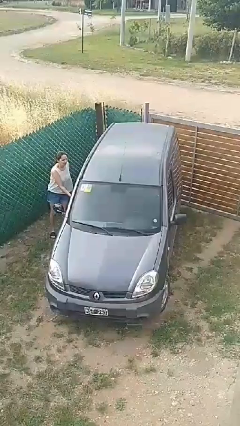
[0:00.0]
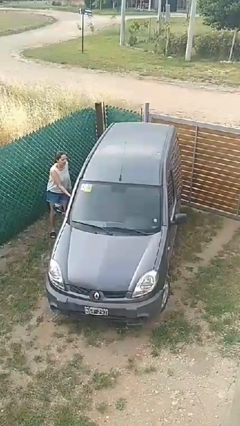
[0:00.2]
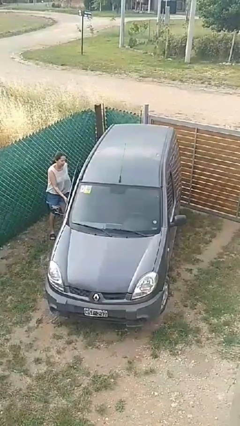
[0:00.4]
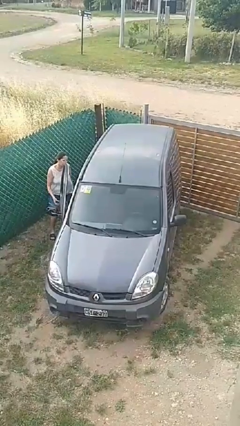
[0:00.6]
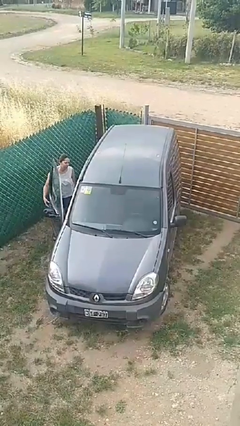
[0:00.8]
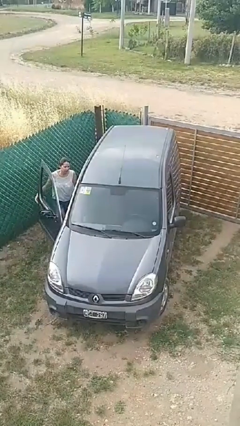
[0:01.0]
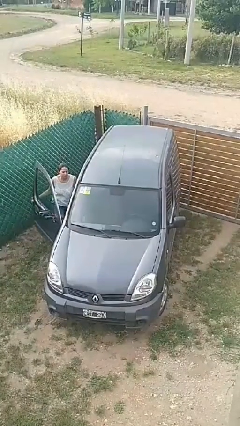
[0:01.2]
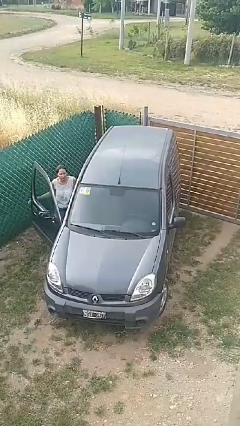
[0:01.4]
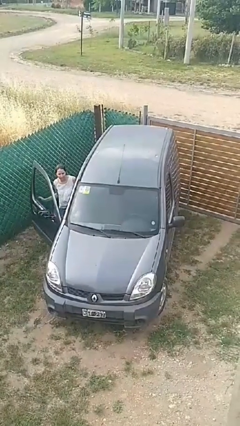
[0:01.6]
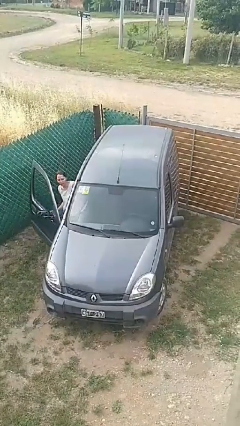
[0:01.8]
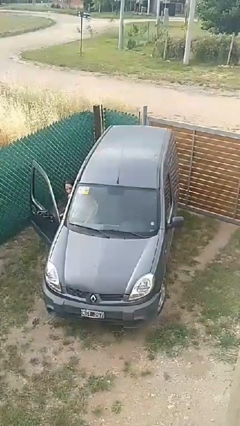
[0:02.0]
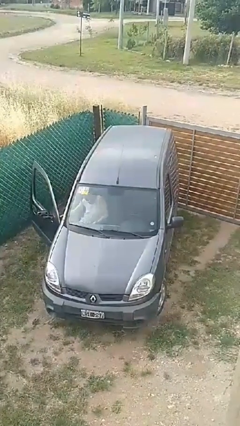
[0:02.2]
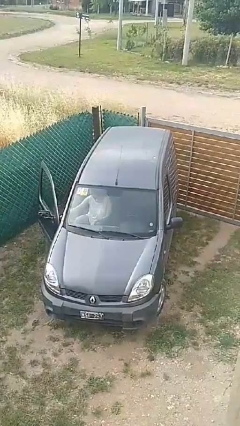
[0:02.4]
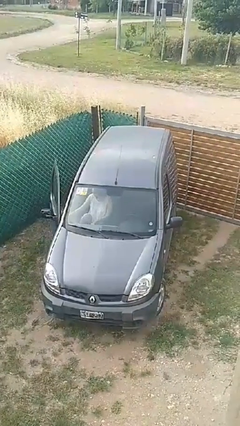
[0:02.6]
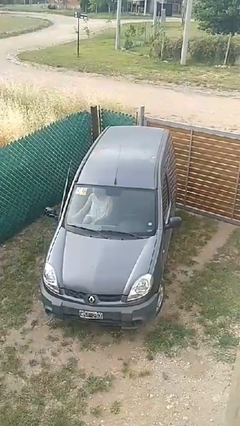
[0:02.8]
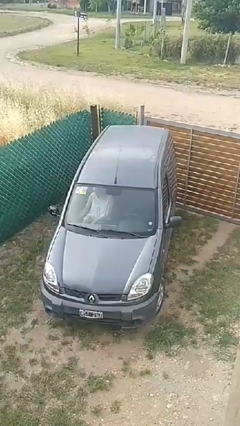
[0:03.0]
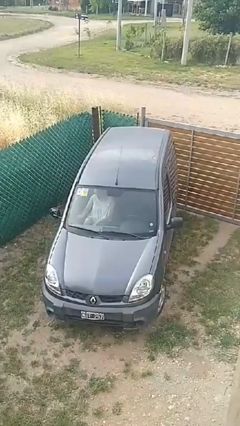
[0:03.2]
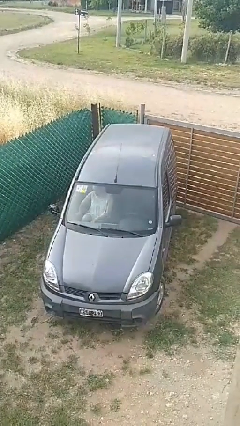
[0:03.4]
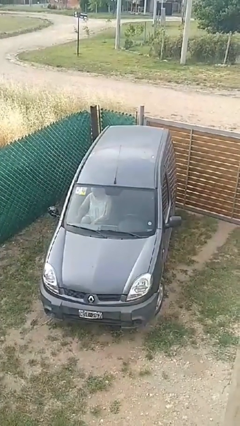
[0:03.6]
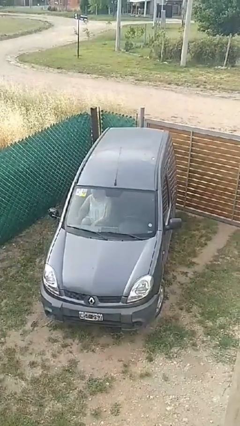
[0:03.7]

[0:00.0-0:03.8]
car picks up person

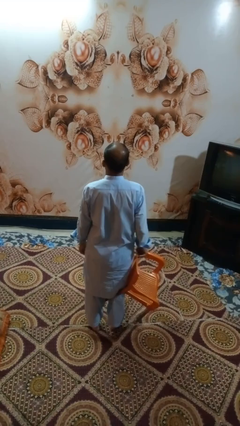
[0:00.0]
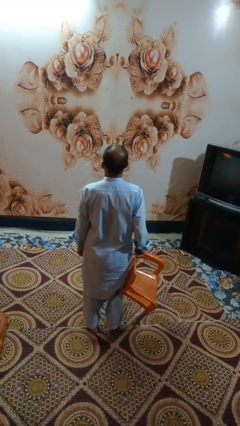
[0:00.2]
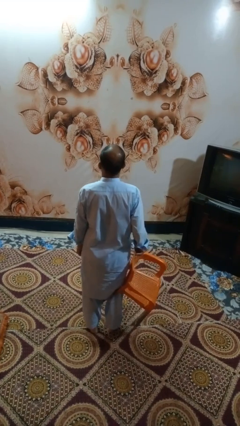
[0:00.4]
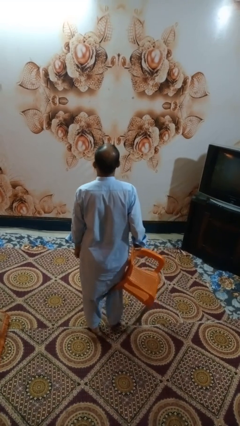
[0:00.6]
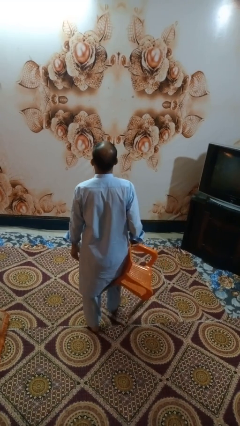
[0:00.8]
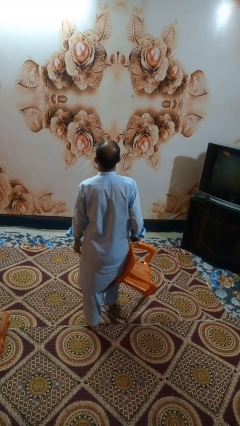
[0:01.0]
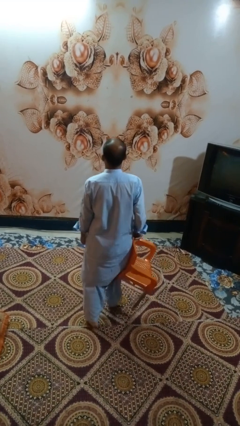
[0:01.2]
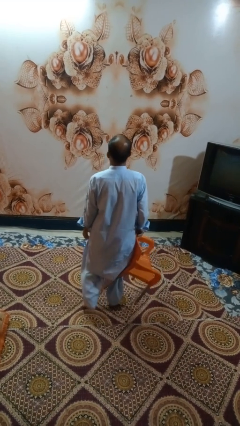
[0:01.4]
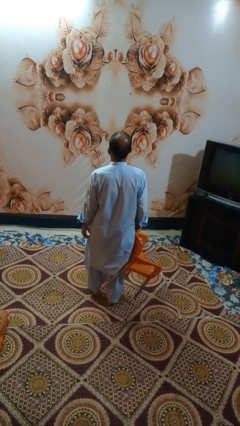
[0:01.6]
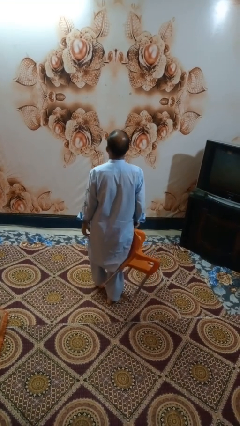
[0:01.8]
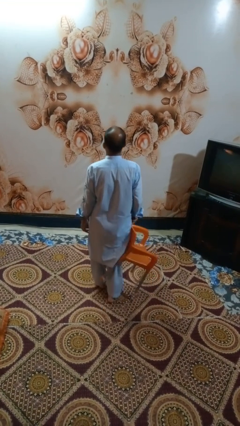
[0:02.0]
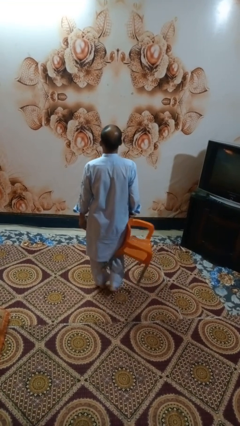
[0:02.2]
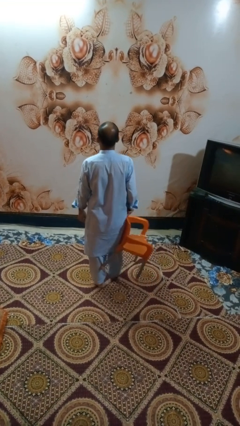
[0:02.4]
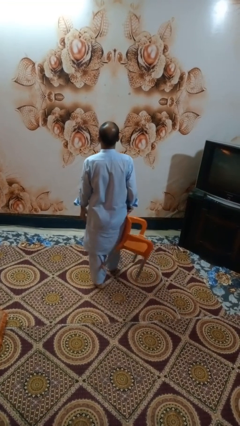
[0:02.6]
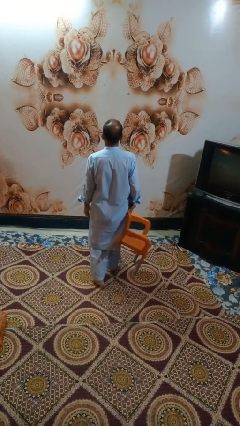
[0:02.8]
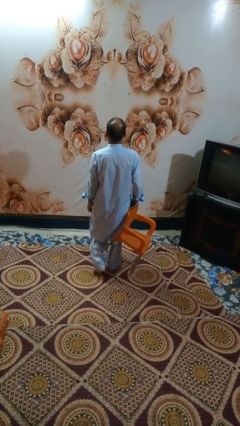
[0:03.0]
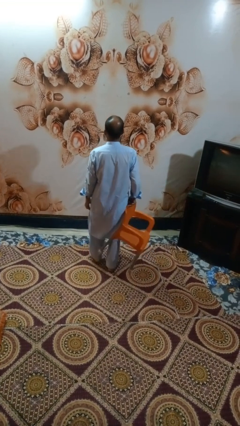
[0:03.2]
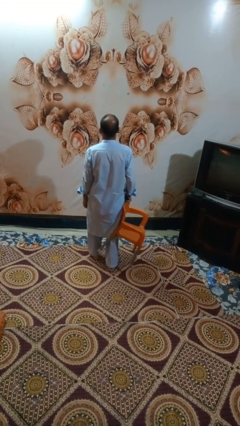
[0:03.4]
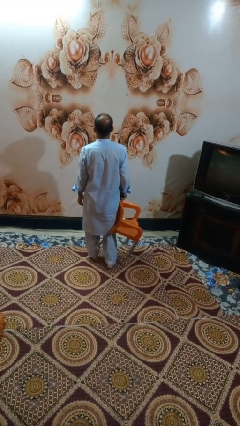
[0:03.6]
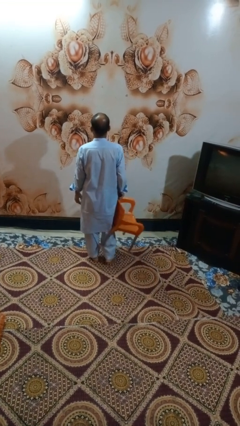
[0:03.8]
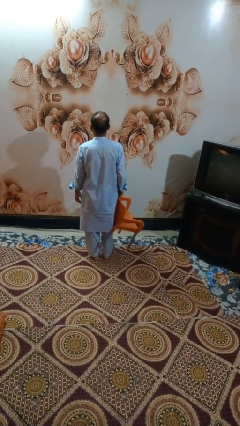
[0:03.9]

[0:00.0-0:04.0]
person carries furniture

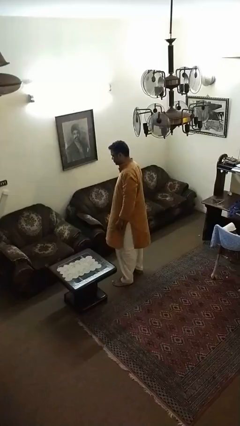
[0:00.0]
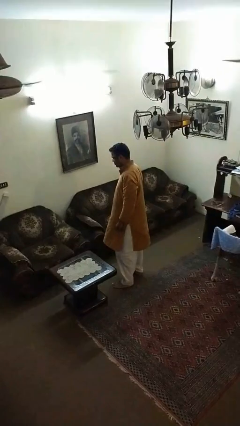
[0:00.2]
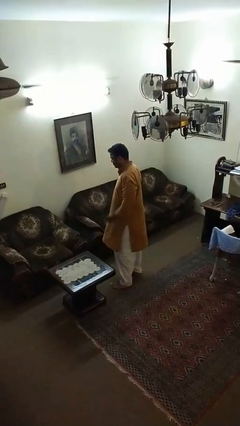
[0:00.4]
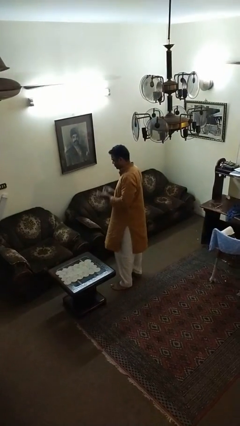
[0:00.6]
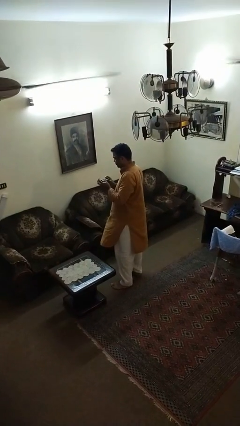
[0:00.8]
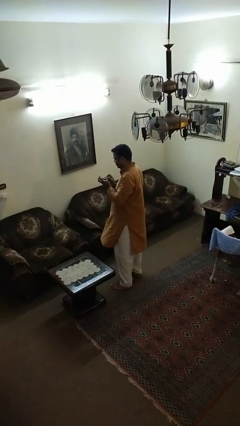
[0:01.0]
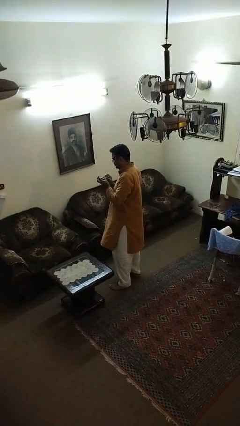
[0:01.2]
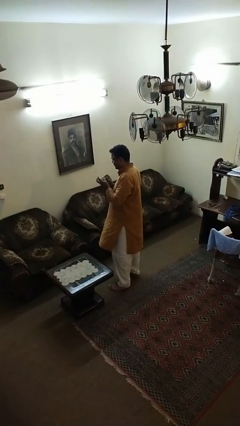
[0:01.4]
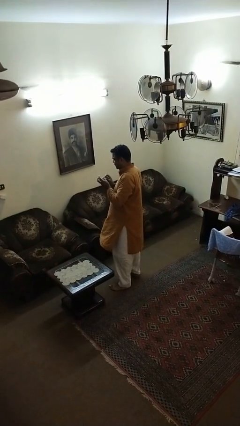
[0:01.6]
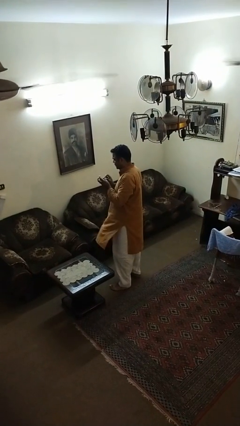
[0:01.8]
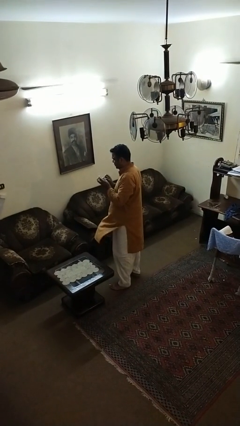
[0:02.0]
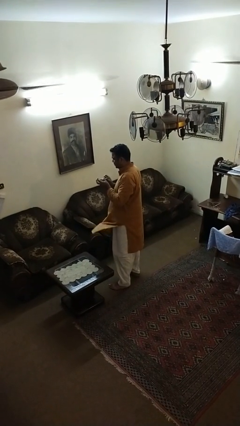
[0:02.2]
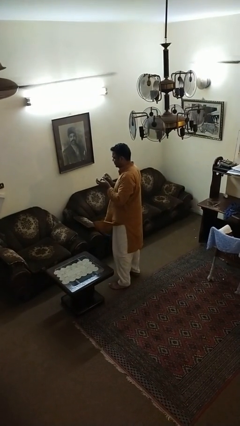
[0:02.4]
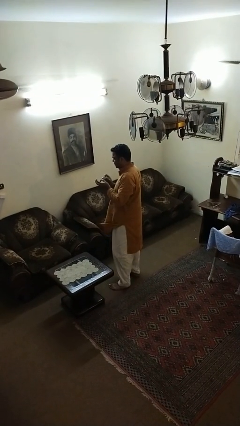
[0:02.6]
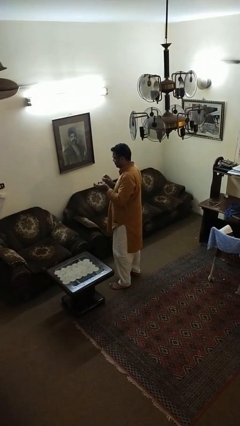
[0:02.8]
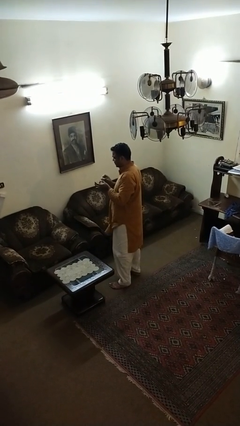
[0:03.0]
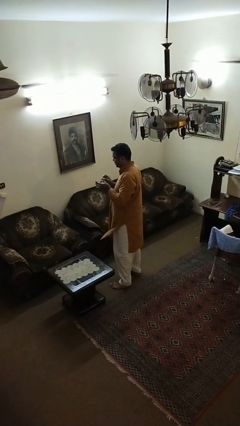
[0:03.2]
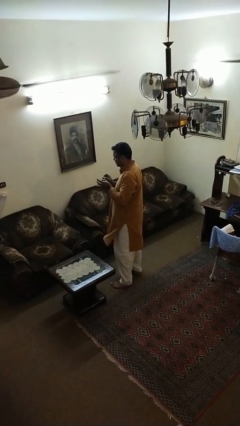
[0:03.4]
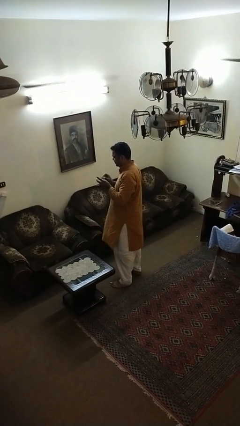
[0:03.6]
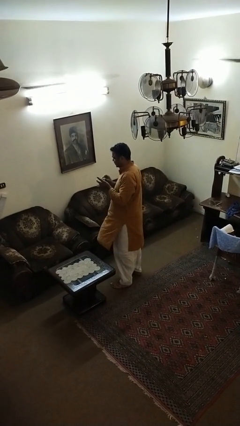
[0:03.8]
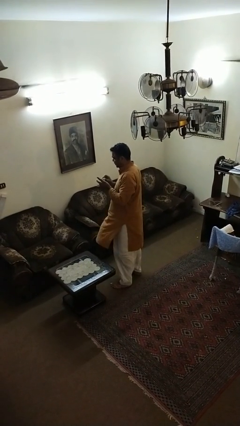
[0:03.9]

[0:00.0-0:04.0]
person clips fingernails

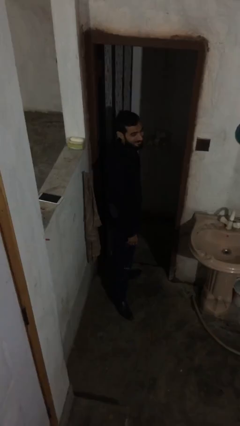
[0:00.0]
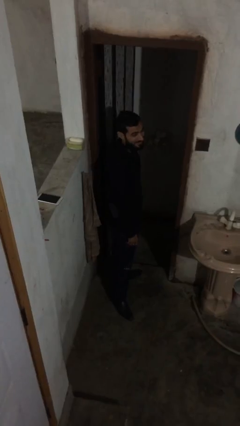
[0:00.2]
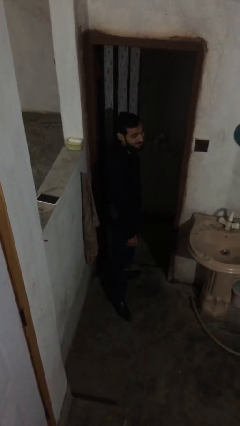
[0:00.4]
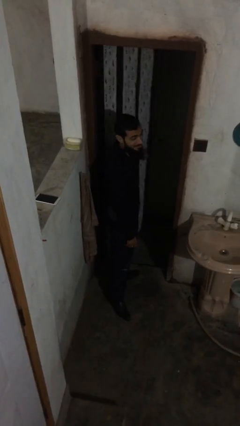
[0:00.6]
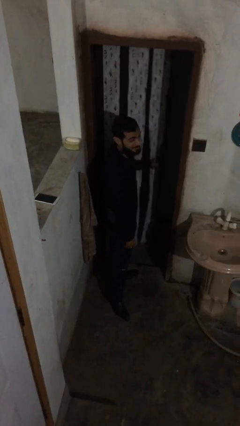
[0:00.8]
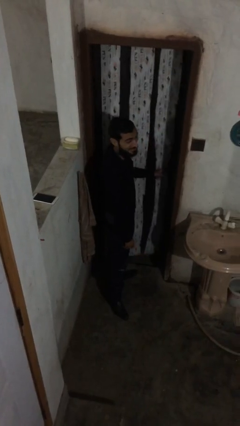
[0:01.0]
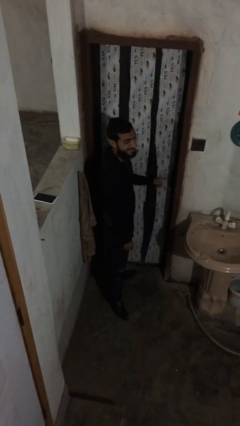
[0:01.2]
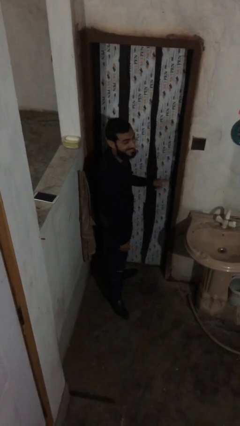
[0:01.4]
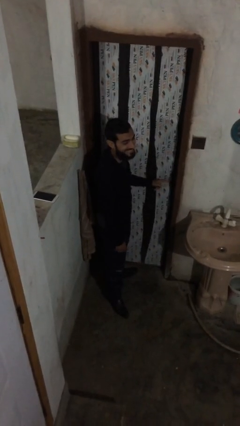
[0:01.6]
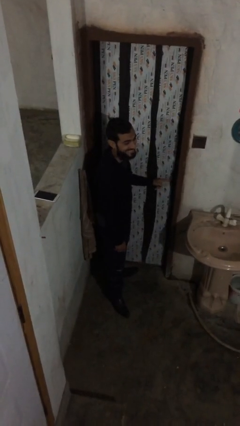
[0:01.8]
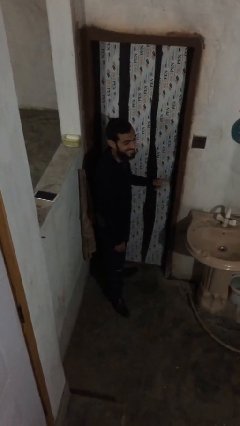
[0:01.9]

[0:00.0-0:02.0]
person closes facility door

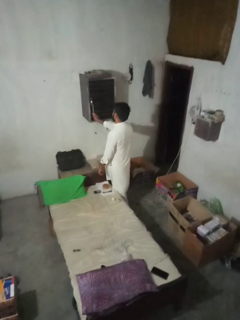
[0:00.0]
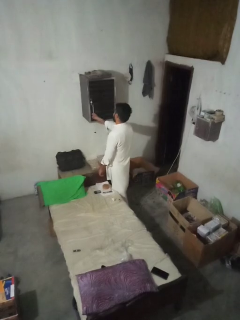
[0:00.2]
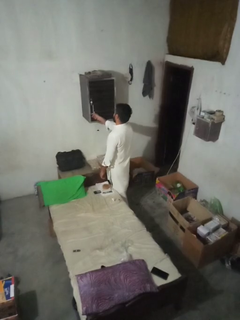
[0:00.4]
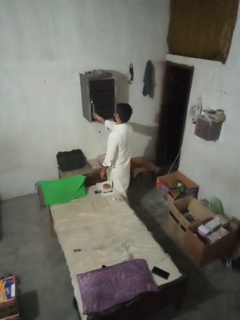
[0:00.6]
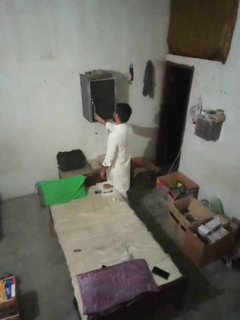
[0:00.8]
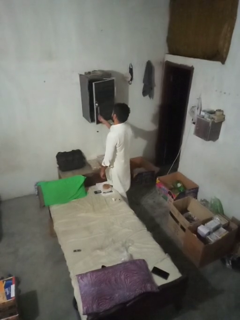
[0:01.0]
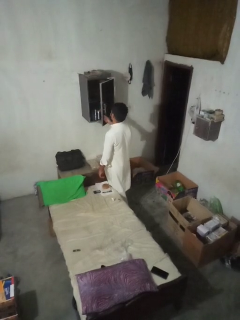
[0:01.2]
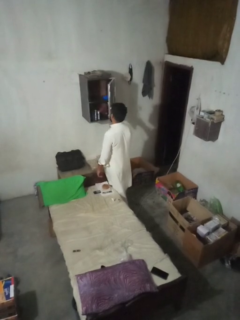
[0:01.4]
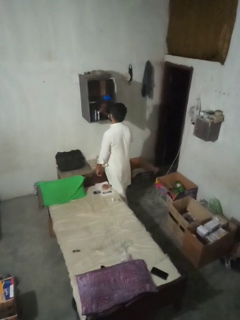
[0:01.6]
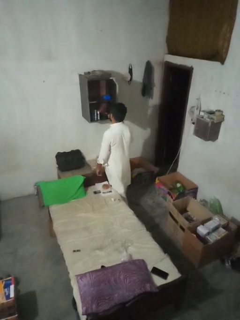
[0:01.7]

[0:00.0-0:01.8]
person opens dresser drawer

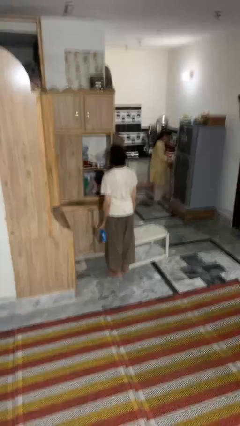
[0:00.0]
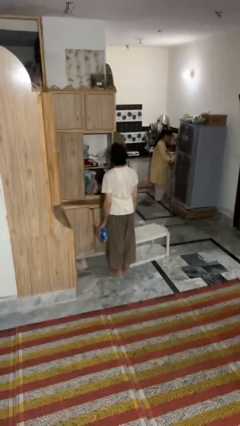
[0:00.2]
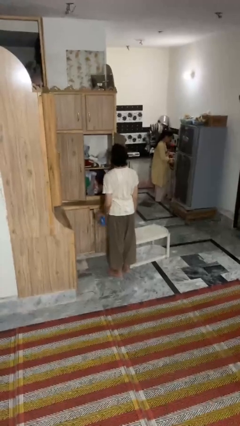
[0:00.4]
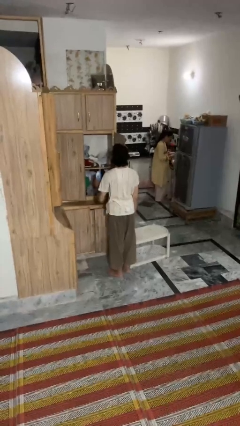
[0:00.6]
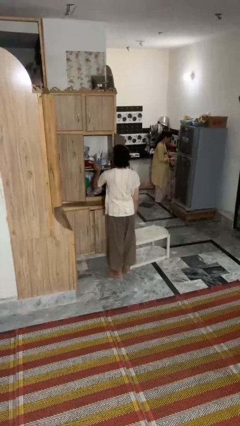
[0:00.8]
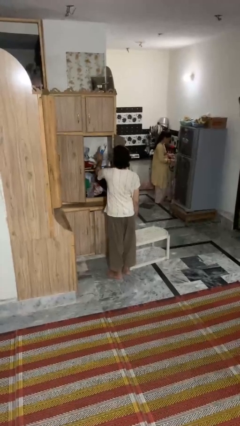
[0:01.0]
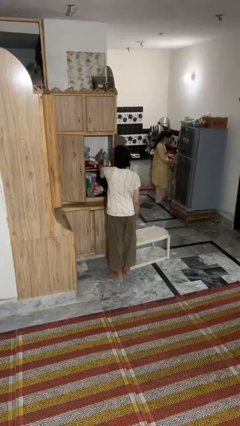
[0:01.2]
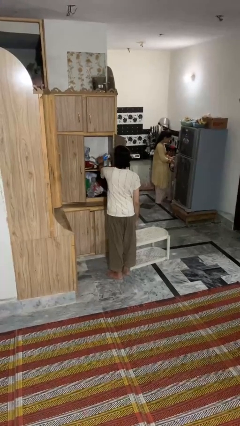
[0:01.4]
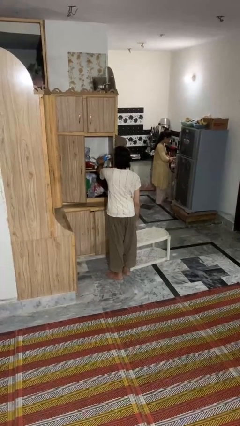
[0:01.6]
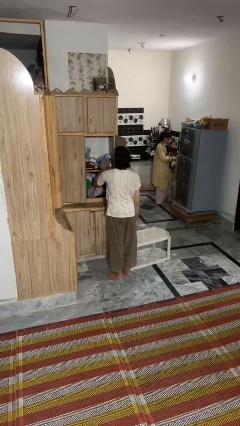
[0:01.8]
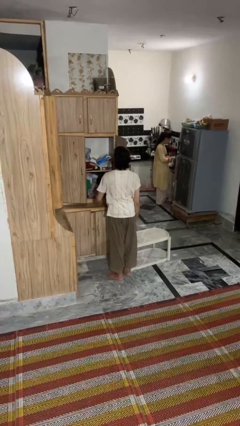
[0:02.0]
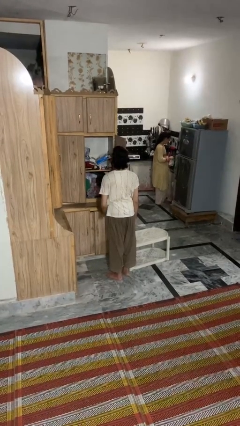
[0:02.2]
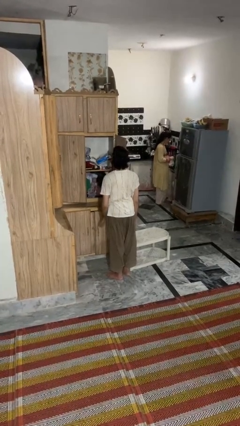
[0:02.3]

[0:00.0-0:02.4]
person puts down object into cabinet

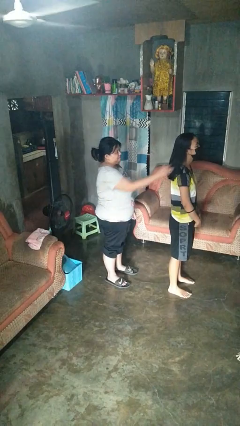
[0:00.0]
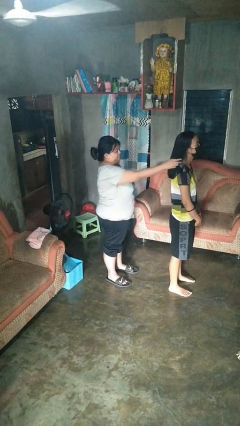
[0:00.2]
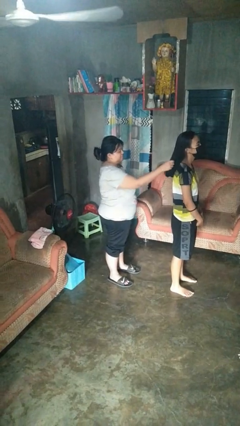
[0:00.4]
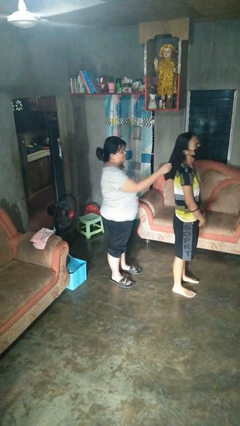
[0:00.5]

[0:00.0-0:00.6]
person grabs person by hair
